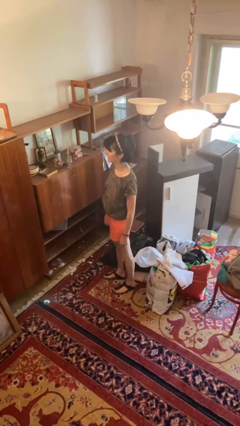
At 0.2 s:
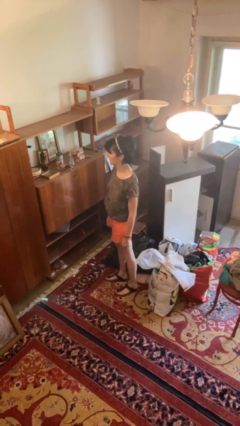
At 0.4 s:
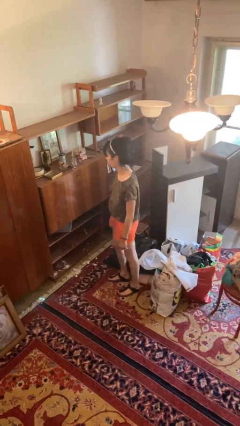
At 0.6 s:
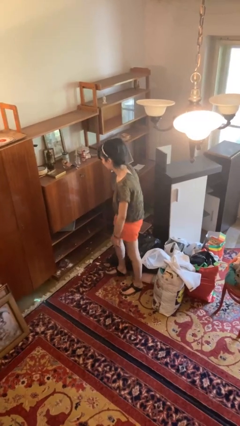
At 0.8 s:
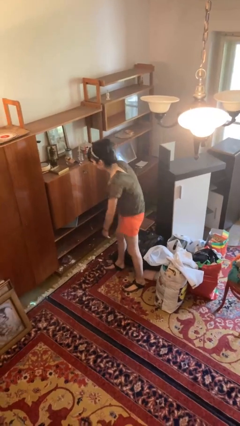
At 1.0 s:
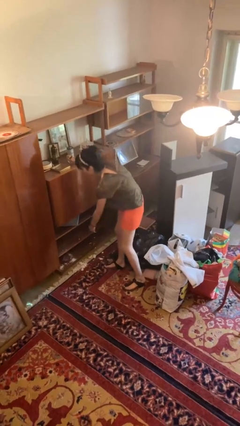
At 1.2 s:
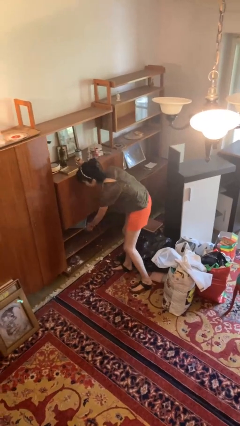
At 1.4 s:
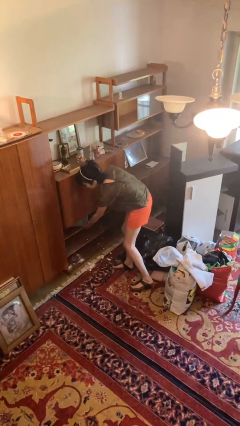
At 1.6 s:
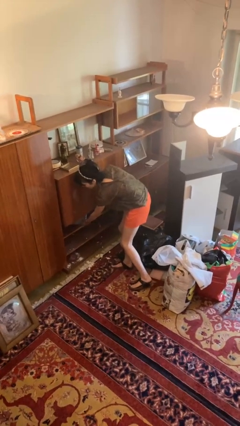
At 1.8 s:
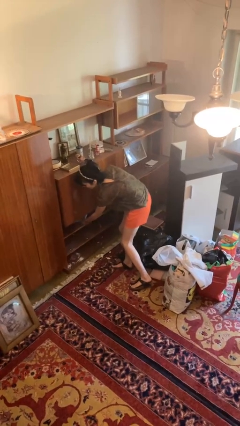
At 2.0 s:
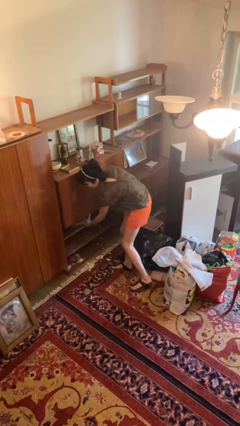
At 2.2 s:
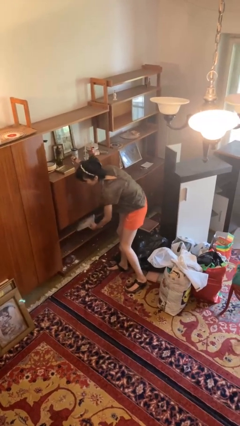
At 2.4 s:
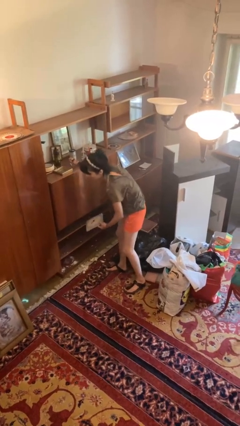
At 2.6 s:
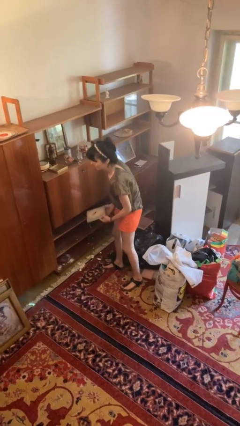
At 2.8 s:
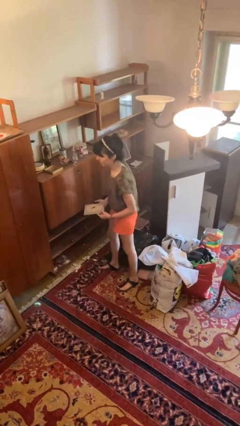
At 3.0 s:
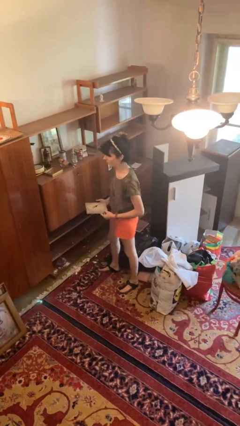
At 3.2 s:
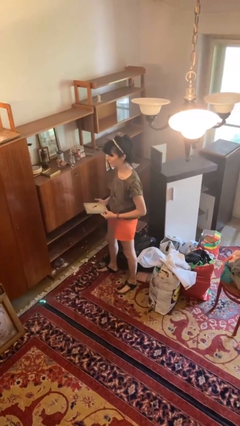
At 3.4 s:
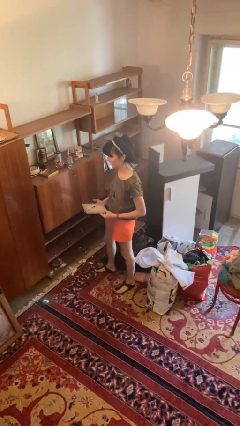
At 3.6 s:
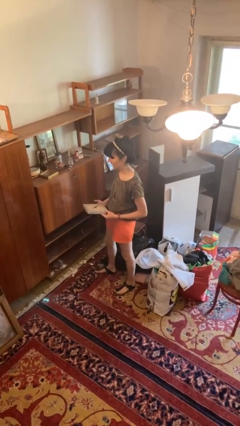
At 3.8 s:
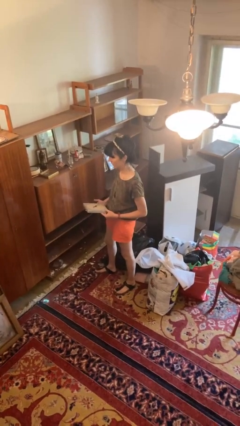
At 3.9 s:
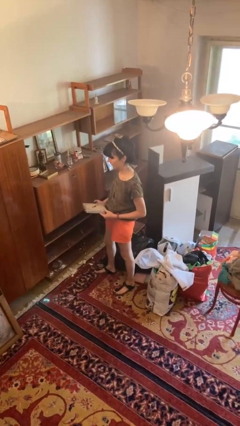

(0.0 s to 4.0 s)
person picks up object from cabinet

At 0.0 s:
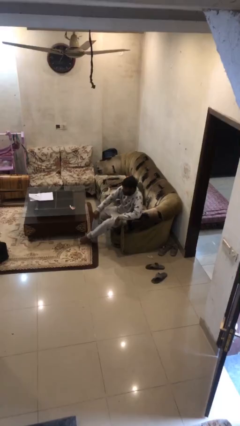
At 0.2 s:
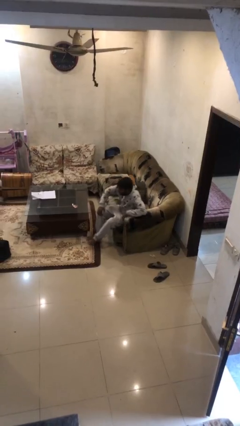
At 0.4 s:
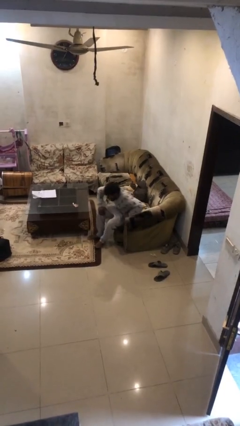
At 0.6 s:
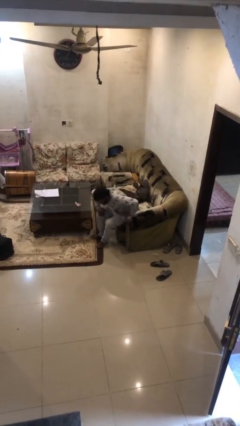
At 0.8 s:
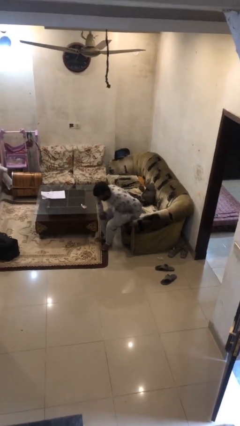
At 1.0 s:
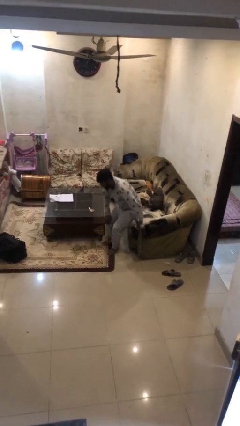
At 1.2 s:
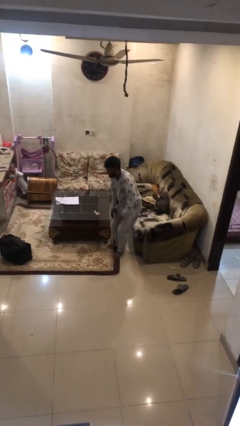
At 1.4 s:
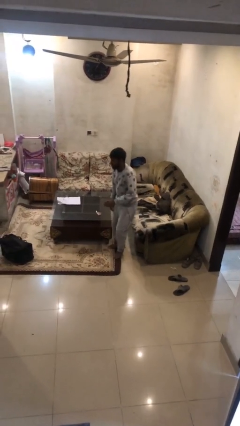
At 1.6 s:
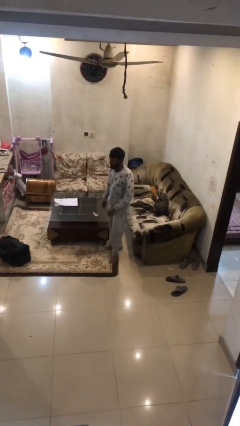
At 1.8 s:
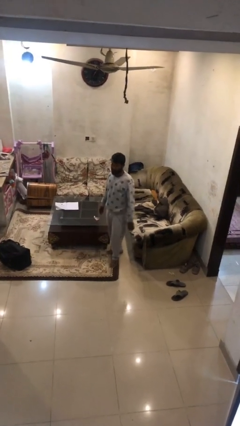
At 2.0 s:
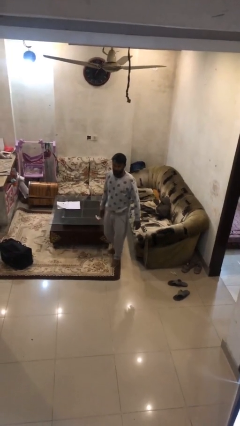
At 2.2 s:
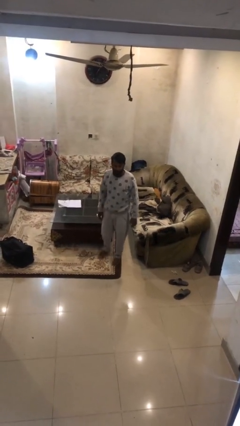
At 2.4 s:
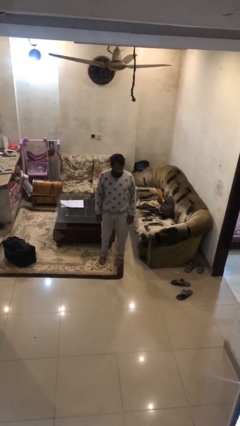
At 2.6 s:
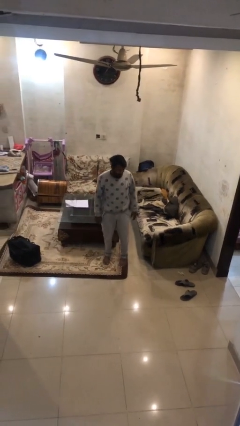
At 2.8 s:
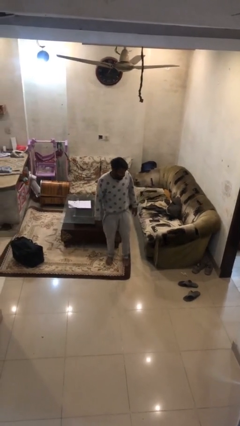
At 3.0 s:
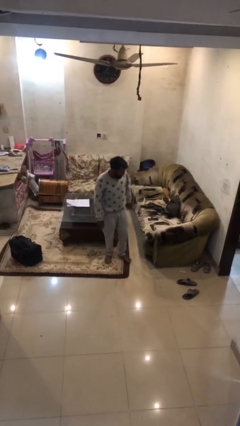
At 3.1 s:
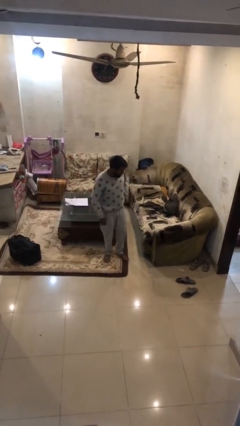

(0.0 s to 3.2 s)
person stands up

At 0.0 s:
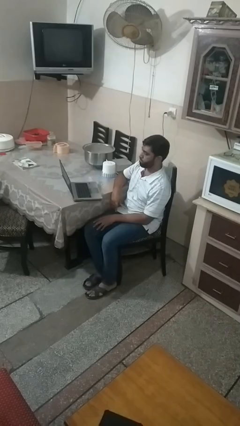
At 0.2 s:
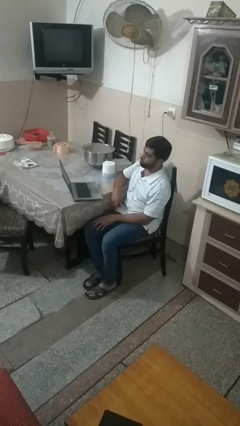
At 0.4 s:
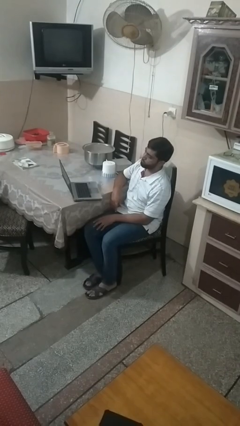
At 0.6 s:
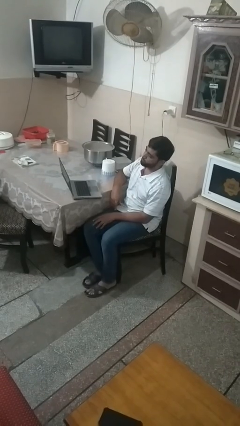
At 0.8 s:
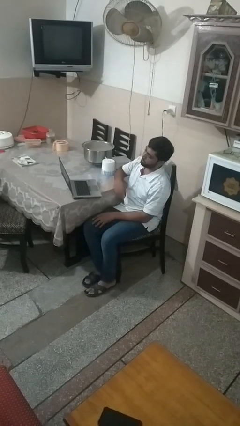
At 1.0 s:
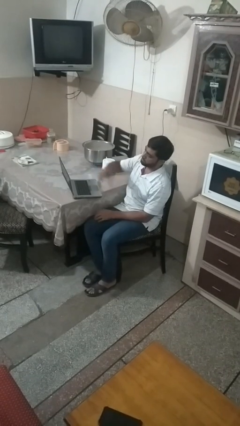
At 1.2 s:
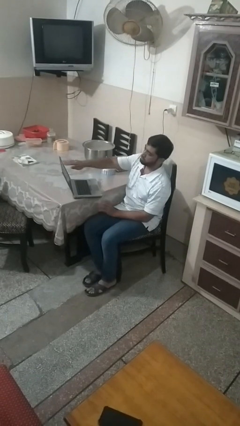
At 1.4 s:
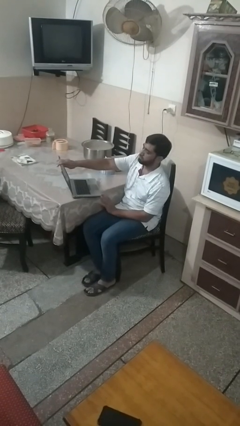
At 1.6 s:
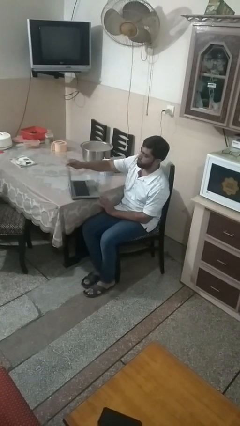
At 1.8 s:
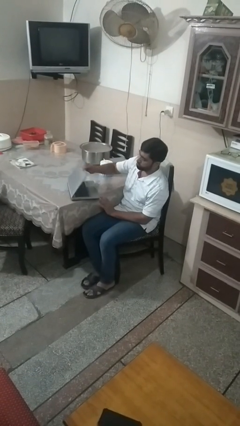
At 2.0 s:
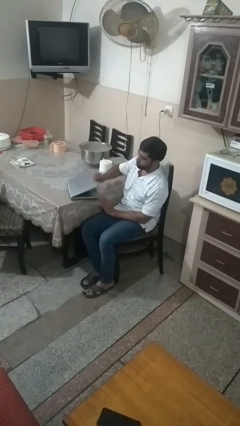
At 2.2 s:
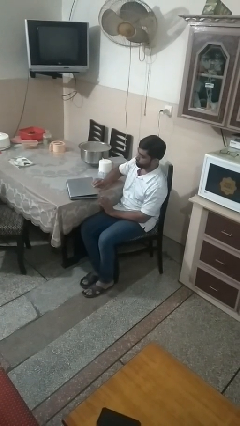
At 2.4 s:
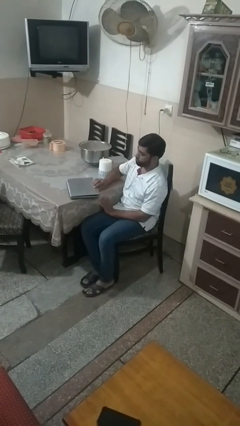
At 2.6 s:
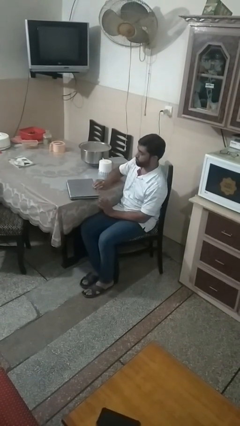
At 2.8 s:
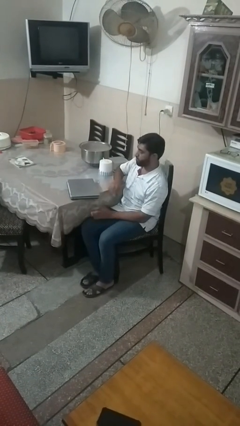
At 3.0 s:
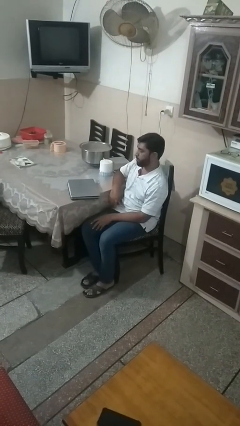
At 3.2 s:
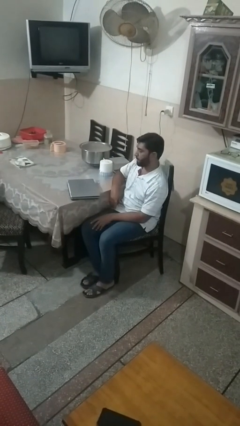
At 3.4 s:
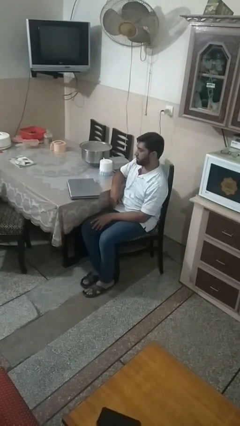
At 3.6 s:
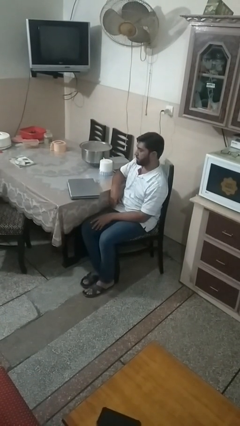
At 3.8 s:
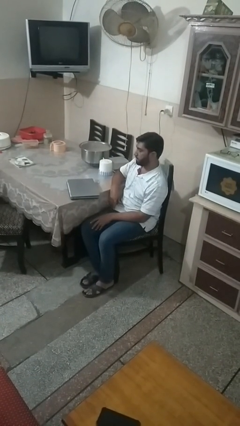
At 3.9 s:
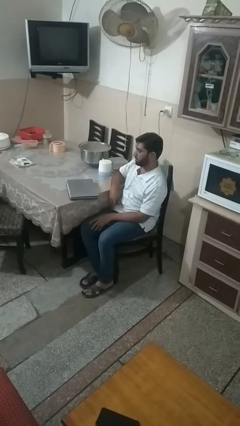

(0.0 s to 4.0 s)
person closes laptop

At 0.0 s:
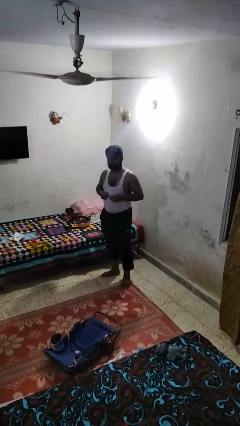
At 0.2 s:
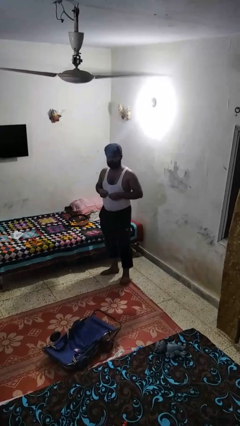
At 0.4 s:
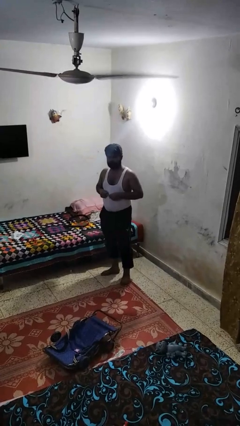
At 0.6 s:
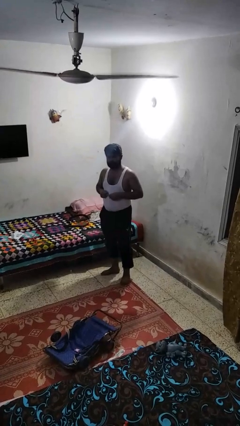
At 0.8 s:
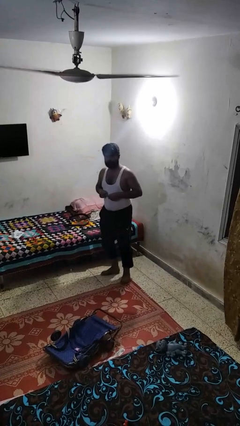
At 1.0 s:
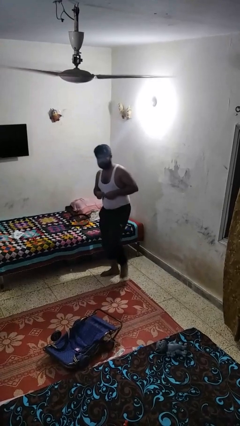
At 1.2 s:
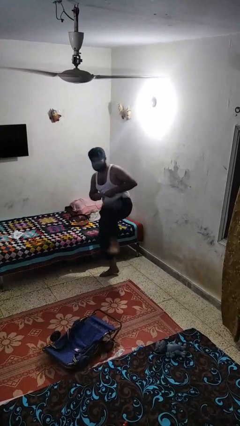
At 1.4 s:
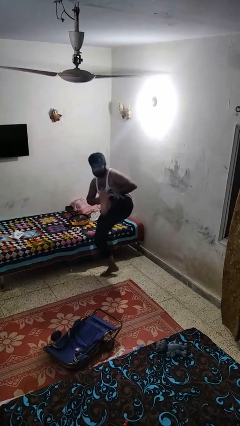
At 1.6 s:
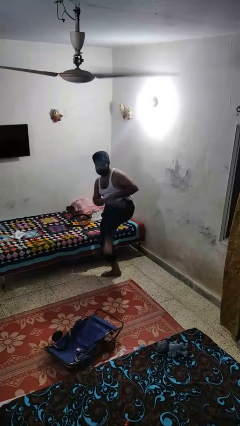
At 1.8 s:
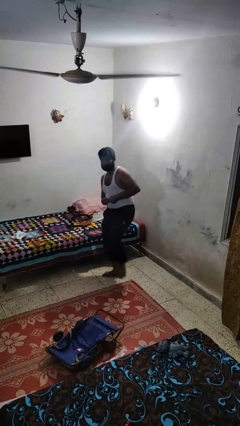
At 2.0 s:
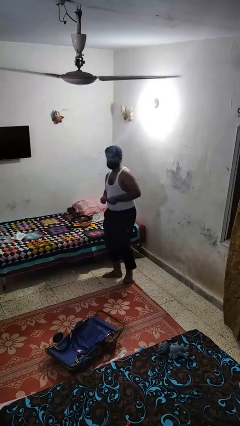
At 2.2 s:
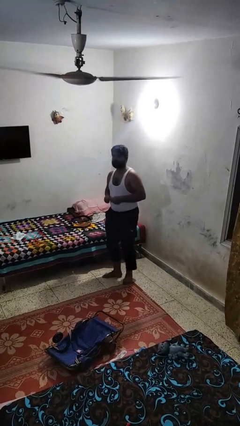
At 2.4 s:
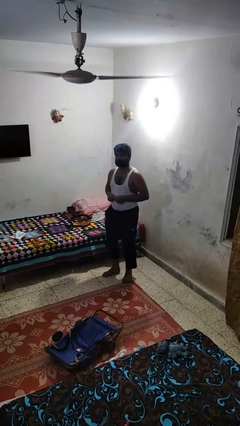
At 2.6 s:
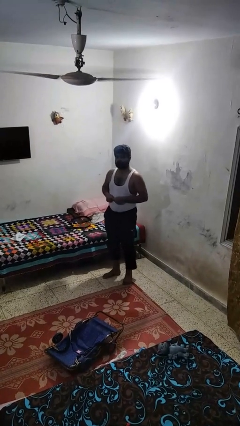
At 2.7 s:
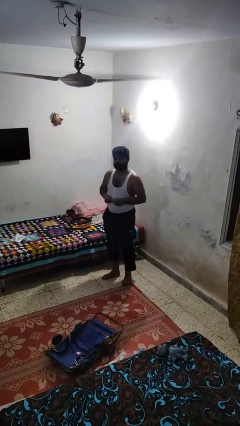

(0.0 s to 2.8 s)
person karate kicks

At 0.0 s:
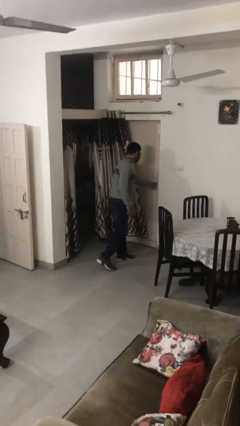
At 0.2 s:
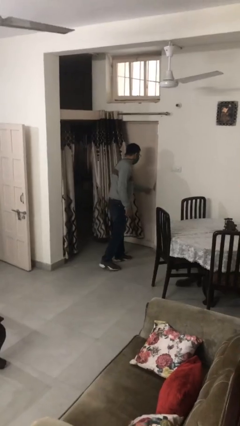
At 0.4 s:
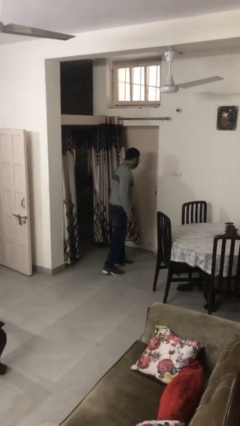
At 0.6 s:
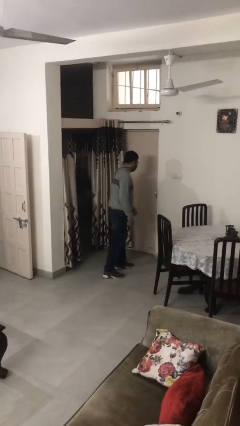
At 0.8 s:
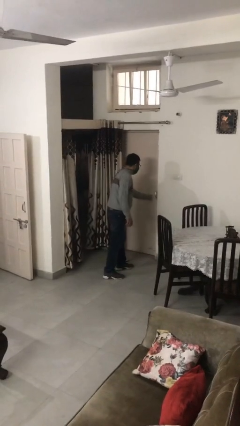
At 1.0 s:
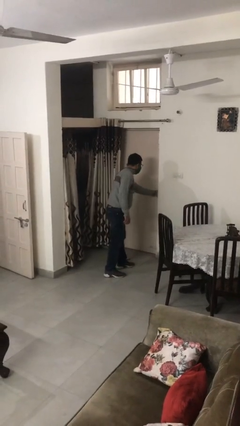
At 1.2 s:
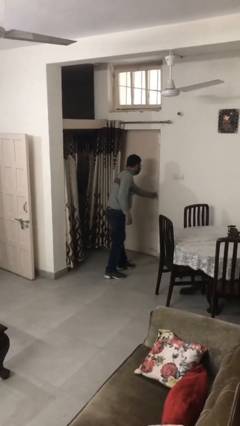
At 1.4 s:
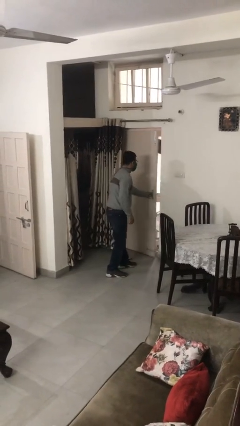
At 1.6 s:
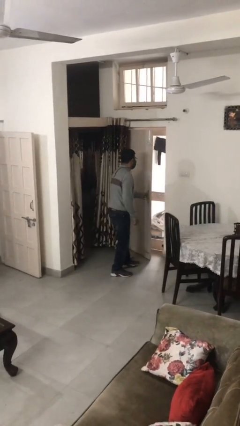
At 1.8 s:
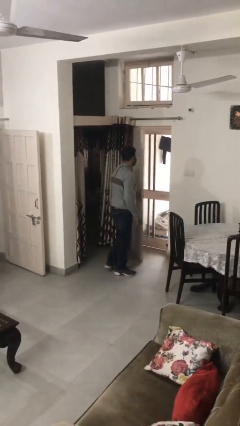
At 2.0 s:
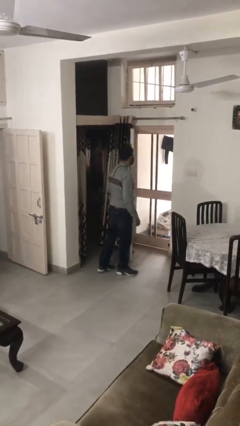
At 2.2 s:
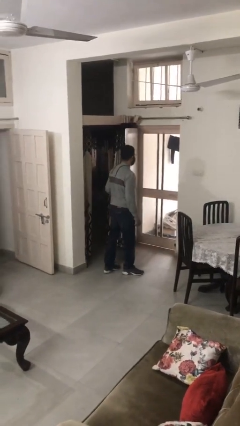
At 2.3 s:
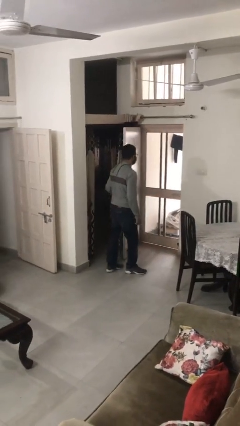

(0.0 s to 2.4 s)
person opens facility door

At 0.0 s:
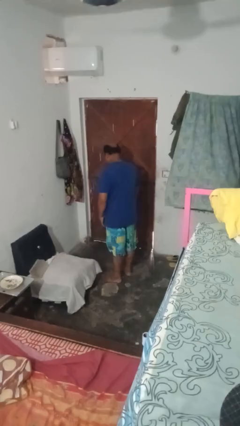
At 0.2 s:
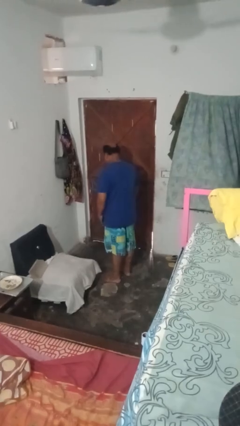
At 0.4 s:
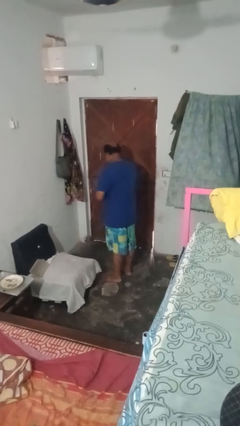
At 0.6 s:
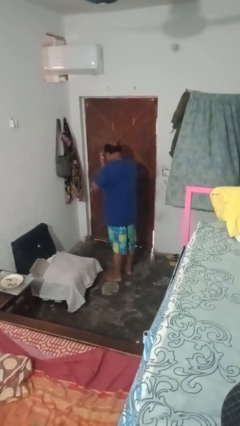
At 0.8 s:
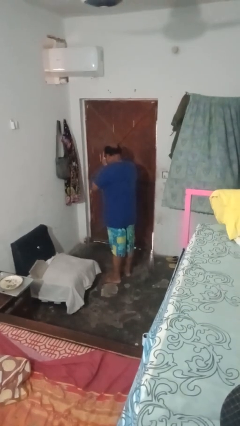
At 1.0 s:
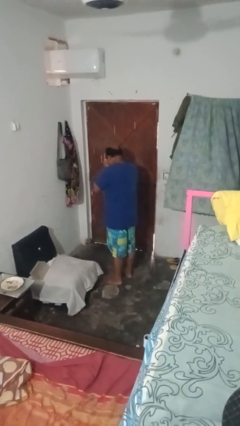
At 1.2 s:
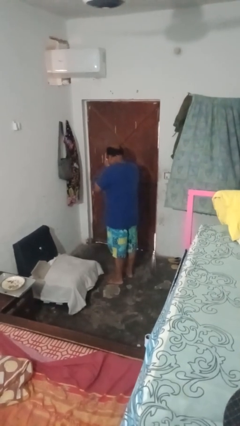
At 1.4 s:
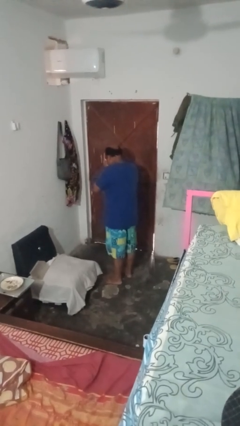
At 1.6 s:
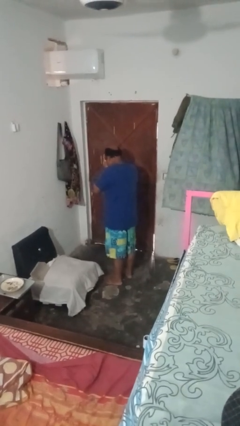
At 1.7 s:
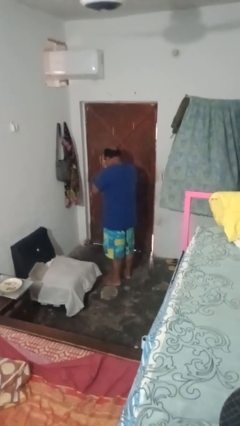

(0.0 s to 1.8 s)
person covers face with hands
